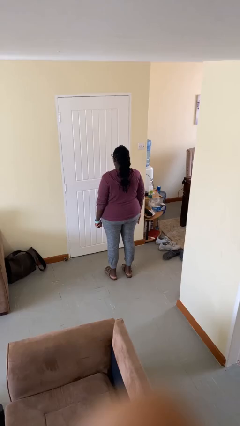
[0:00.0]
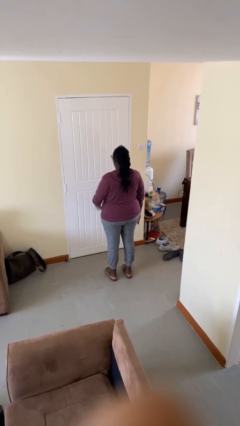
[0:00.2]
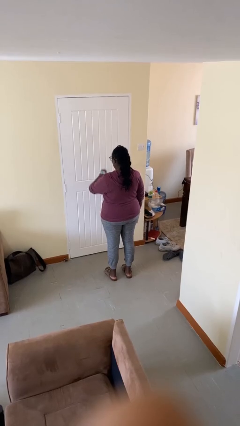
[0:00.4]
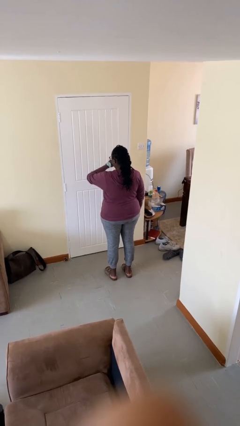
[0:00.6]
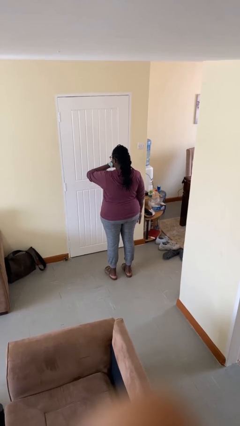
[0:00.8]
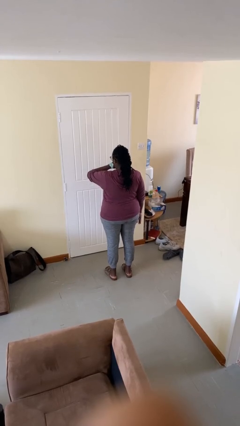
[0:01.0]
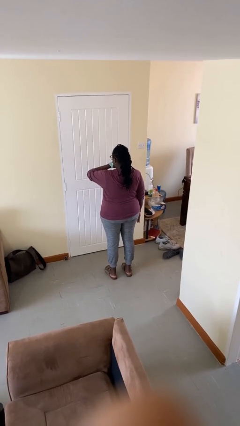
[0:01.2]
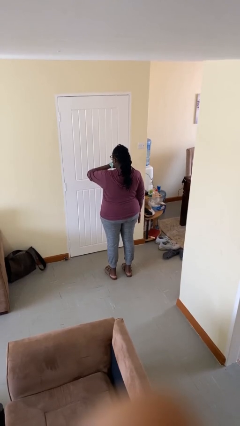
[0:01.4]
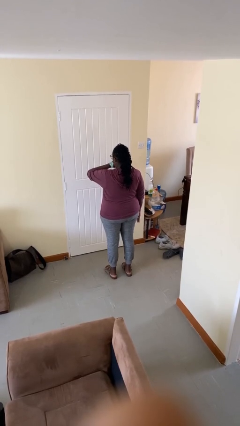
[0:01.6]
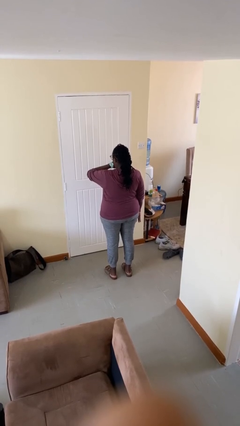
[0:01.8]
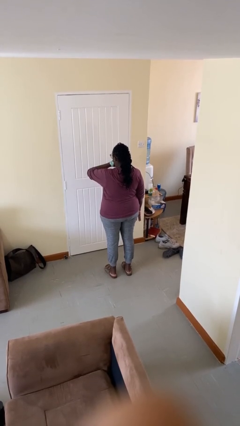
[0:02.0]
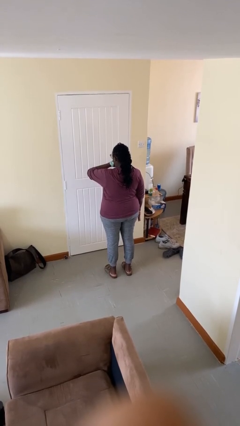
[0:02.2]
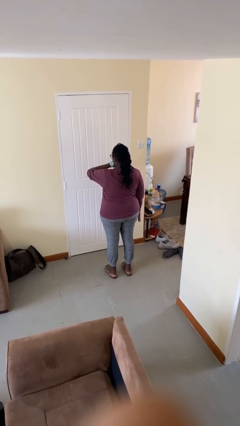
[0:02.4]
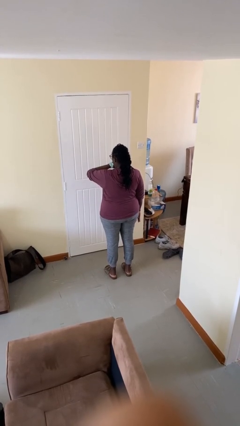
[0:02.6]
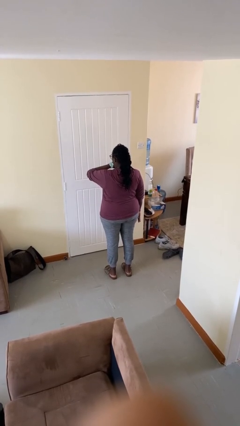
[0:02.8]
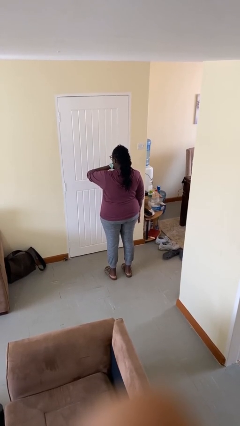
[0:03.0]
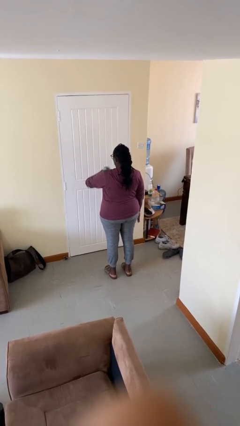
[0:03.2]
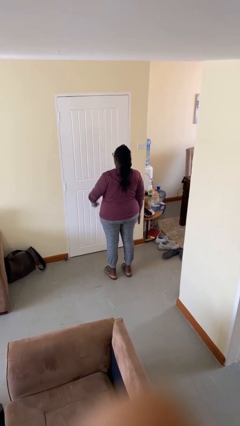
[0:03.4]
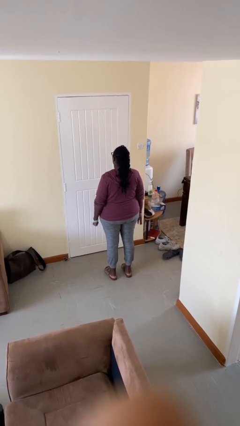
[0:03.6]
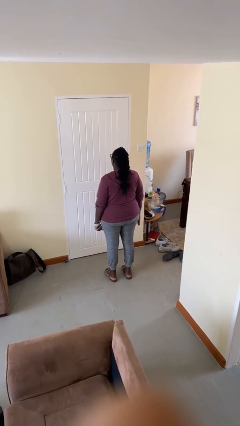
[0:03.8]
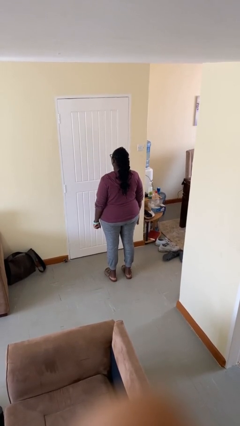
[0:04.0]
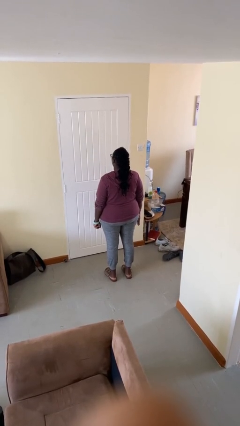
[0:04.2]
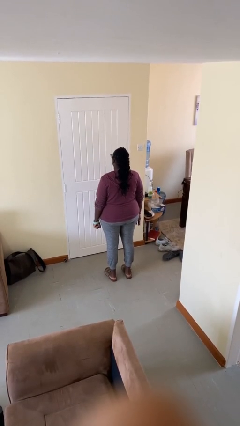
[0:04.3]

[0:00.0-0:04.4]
person looks at wristwatch

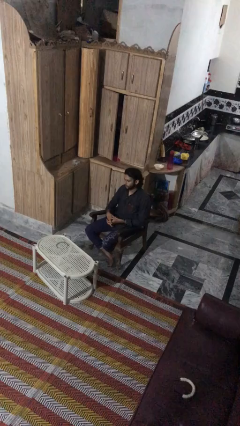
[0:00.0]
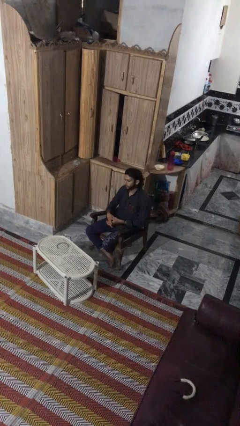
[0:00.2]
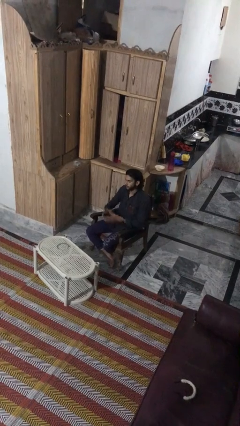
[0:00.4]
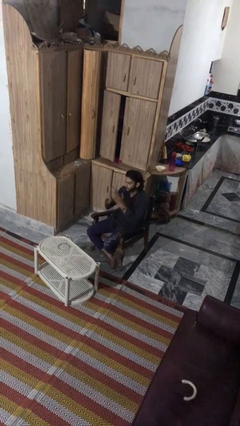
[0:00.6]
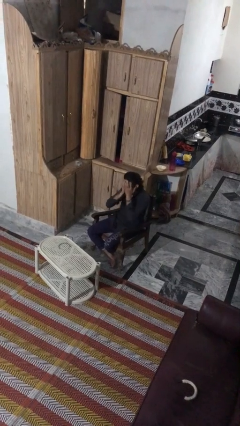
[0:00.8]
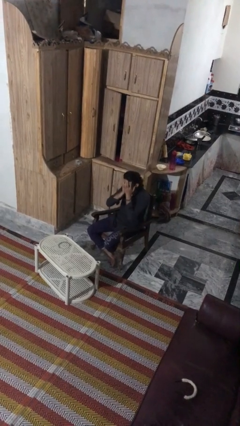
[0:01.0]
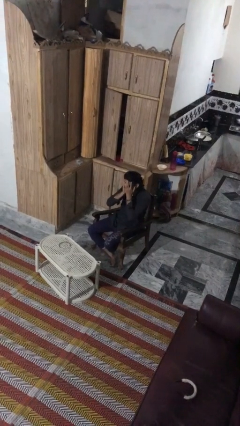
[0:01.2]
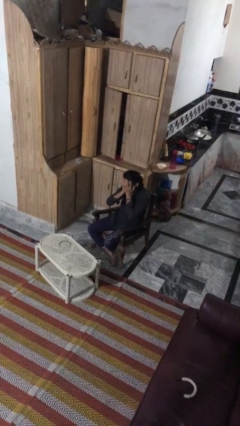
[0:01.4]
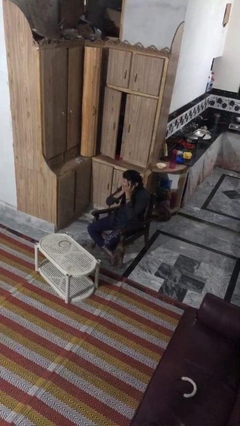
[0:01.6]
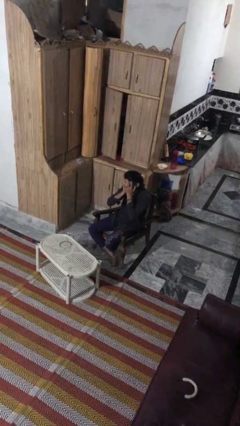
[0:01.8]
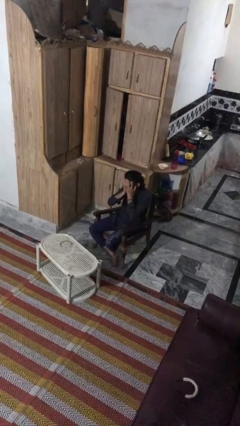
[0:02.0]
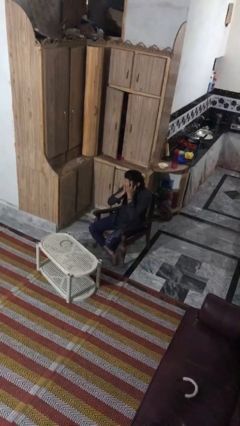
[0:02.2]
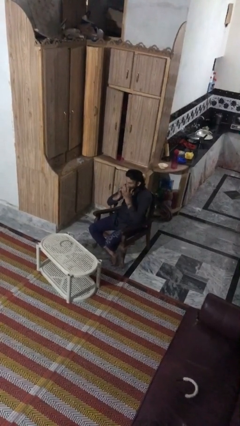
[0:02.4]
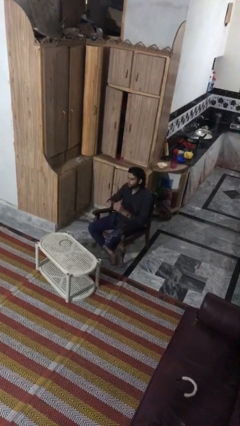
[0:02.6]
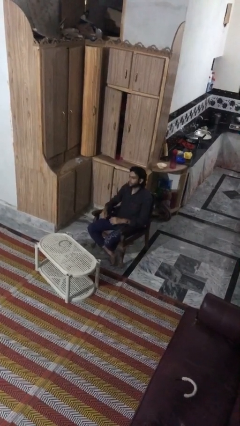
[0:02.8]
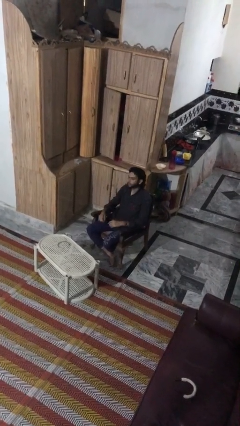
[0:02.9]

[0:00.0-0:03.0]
person covers face with hands

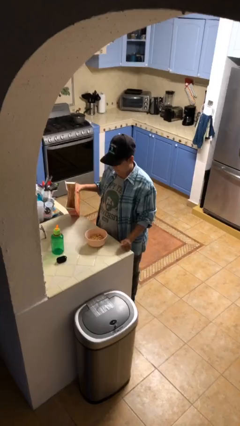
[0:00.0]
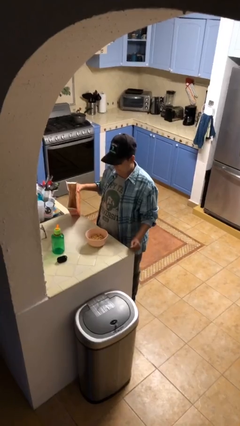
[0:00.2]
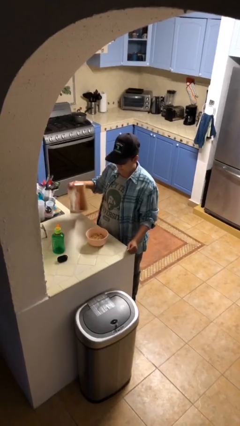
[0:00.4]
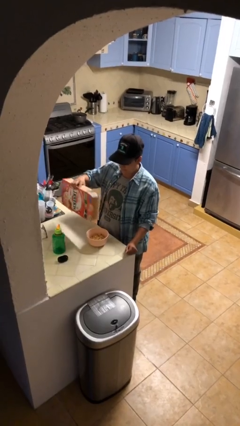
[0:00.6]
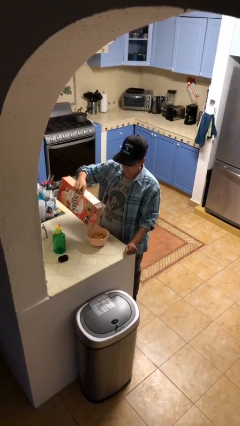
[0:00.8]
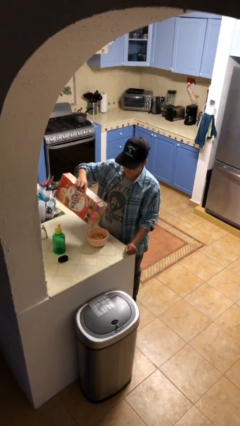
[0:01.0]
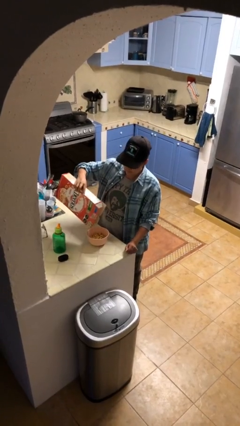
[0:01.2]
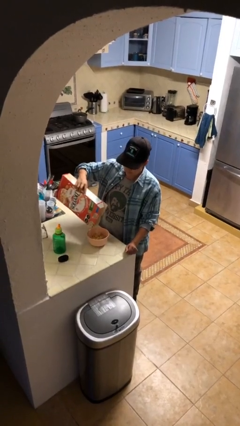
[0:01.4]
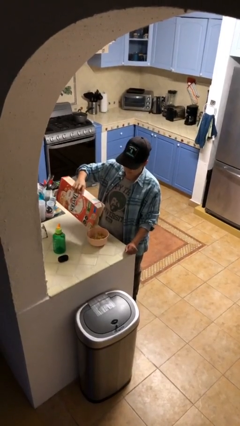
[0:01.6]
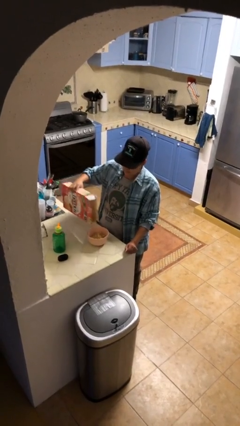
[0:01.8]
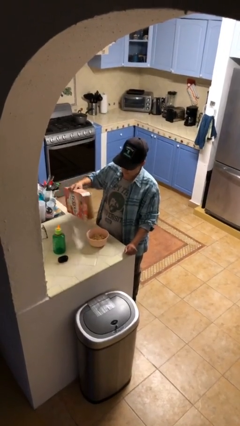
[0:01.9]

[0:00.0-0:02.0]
person pours into bowl

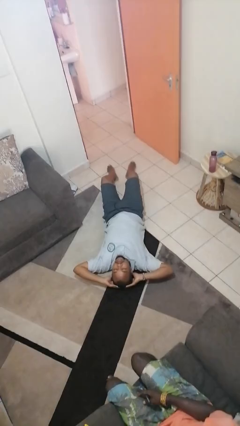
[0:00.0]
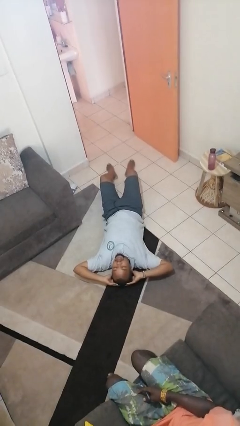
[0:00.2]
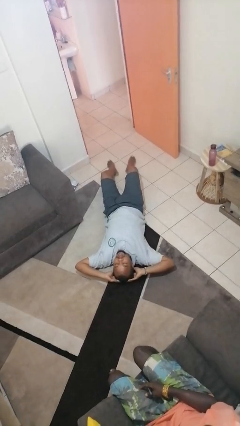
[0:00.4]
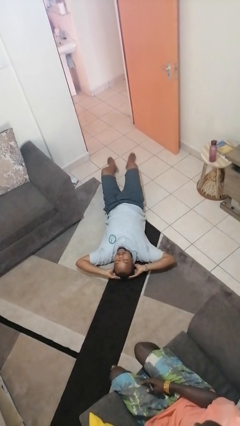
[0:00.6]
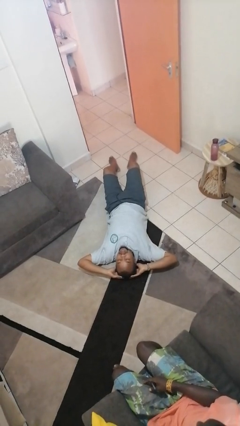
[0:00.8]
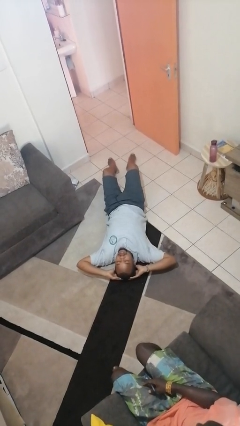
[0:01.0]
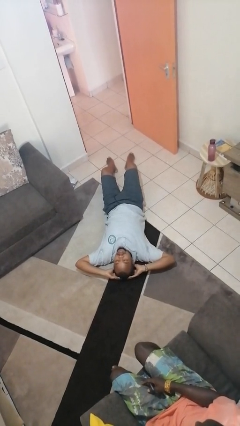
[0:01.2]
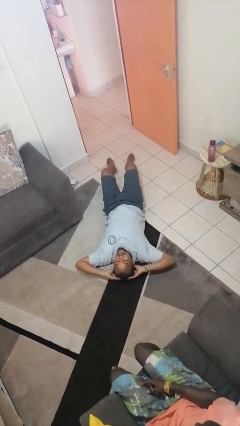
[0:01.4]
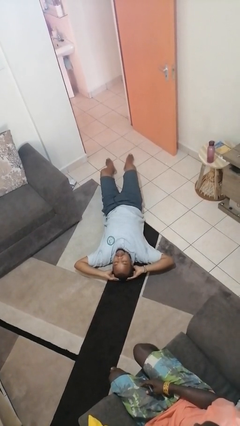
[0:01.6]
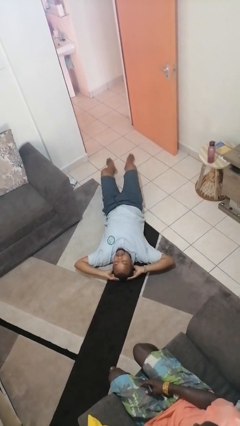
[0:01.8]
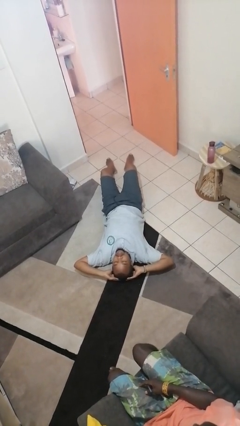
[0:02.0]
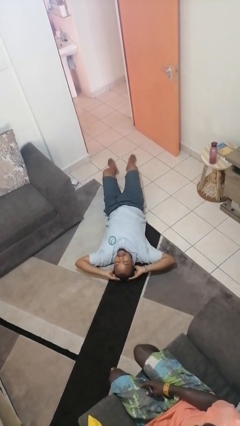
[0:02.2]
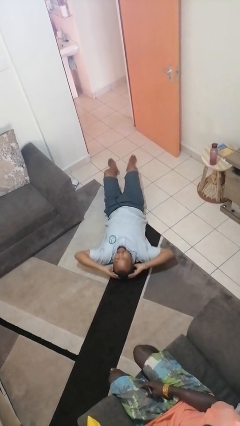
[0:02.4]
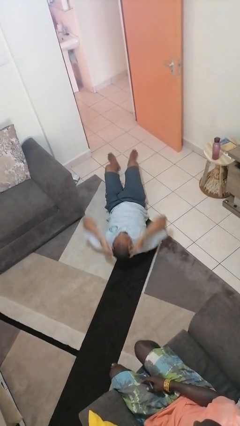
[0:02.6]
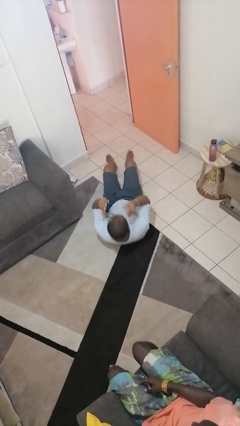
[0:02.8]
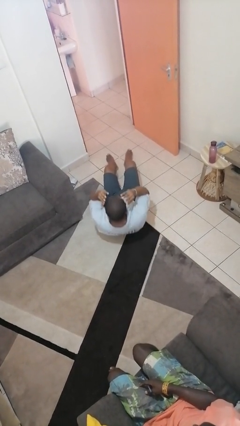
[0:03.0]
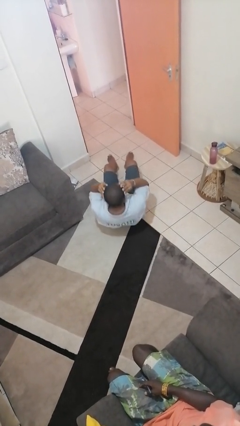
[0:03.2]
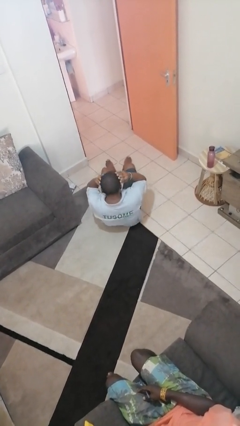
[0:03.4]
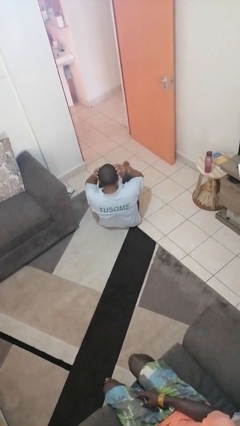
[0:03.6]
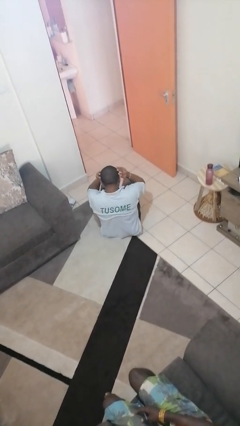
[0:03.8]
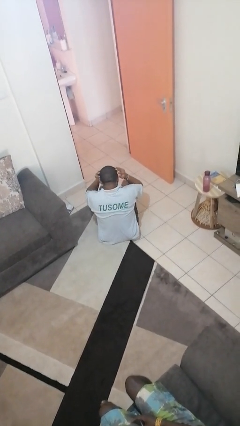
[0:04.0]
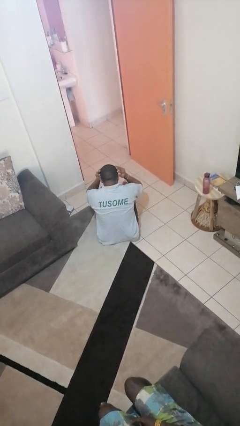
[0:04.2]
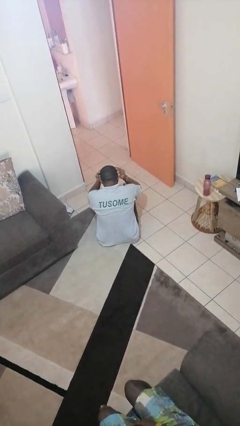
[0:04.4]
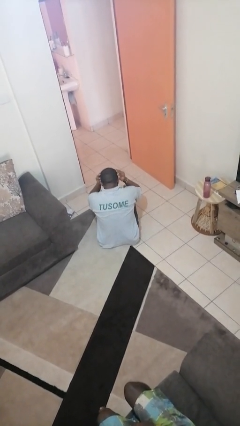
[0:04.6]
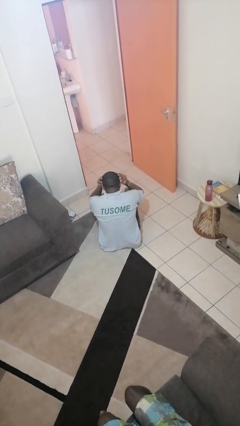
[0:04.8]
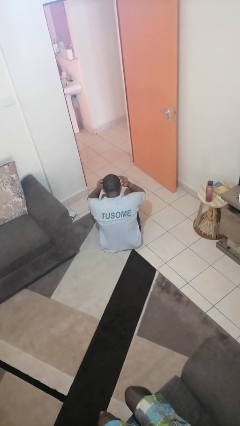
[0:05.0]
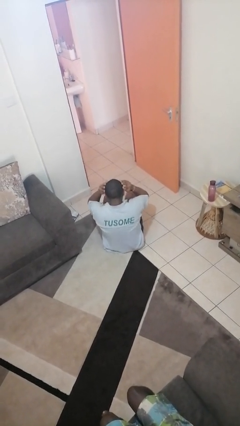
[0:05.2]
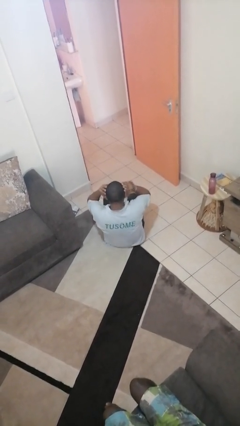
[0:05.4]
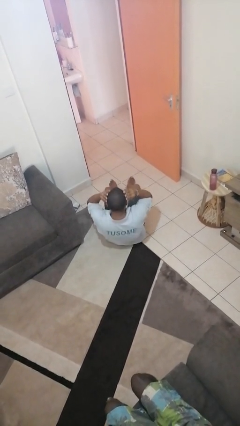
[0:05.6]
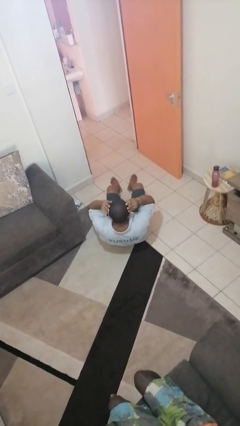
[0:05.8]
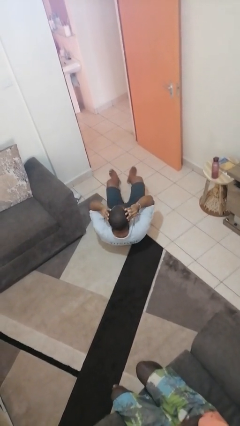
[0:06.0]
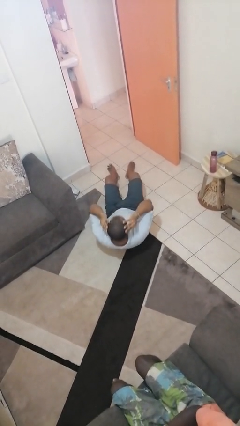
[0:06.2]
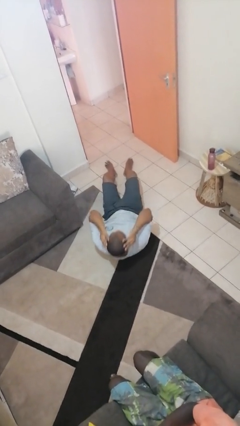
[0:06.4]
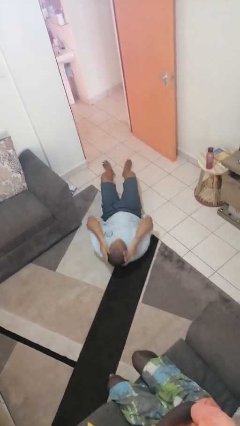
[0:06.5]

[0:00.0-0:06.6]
person exercises with lunges

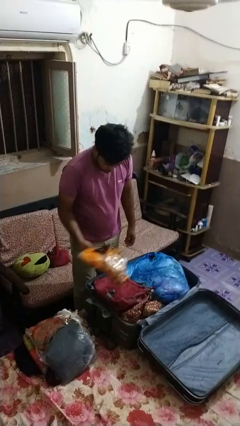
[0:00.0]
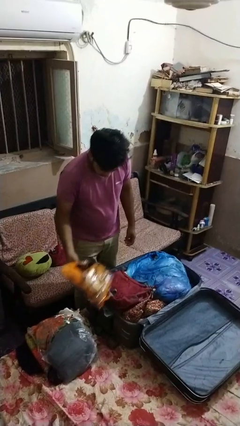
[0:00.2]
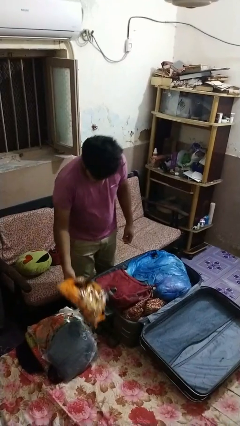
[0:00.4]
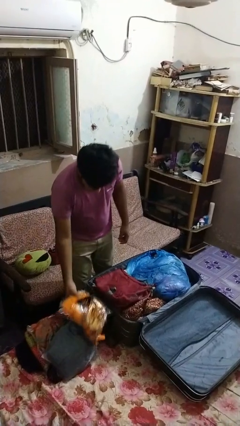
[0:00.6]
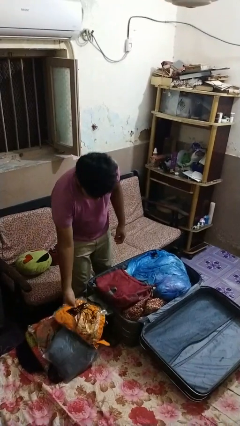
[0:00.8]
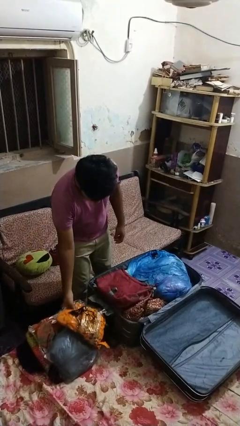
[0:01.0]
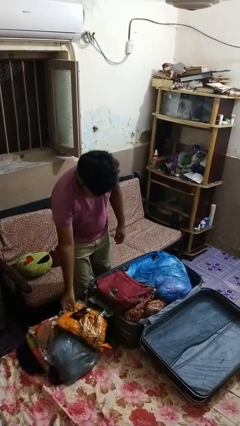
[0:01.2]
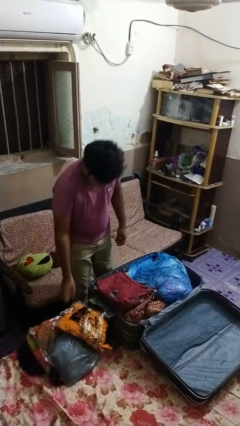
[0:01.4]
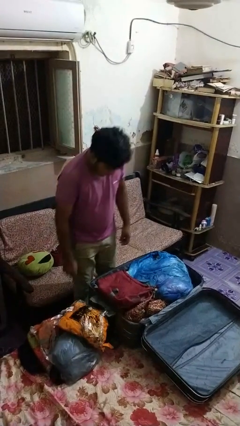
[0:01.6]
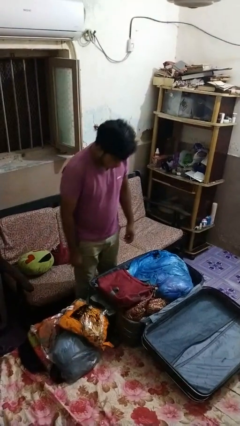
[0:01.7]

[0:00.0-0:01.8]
person unloads clothes from suitcase
